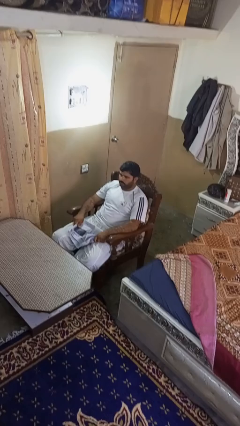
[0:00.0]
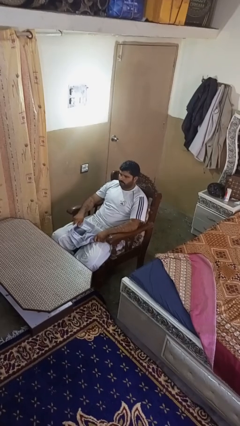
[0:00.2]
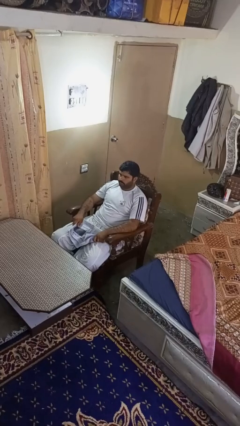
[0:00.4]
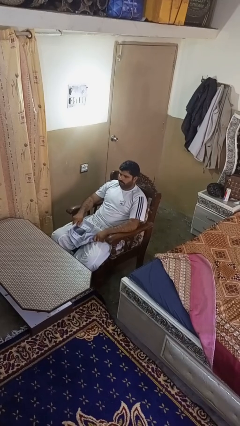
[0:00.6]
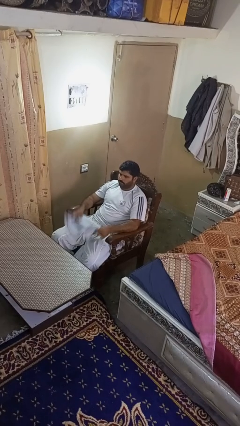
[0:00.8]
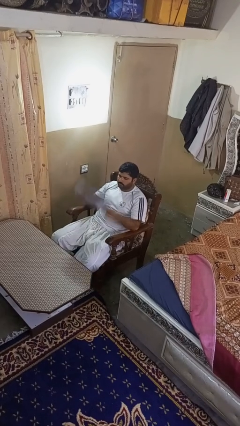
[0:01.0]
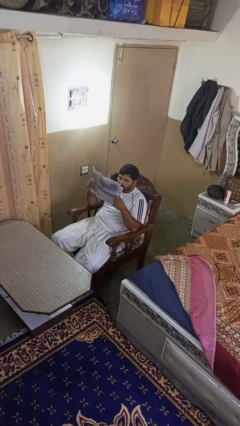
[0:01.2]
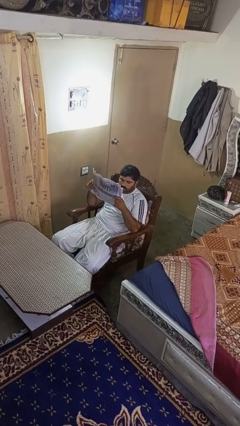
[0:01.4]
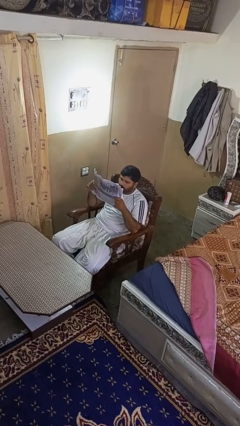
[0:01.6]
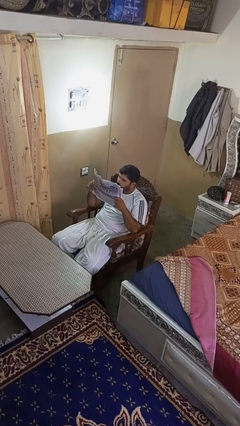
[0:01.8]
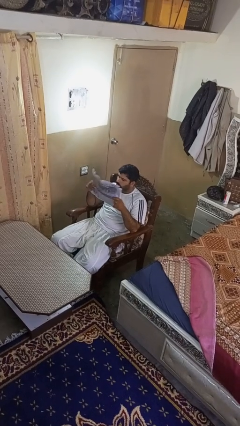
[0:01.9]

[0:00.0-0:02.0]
person reads newspaper

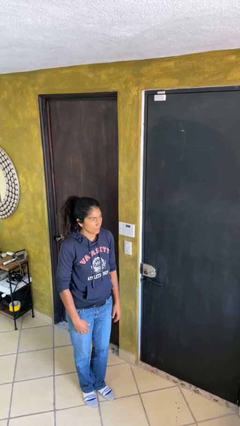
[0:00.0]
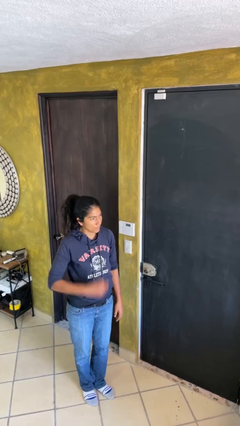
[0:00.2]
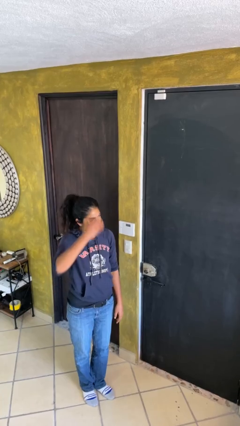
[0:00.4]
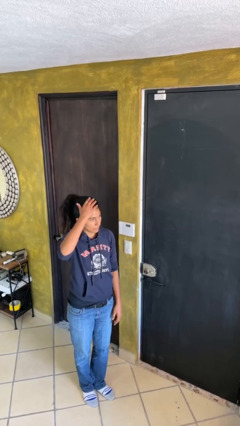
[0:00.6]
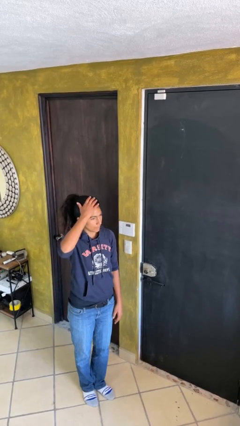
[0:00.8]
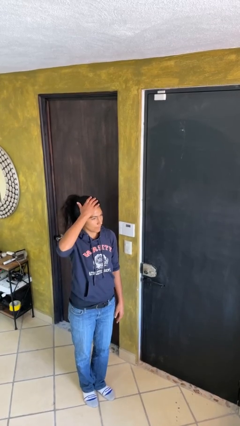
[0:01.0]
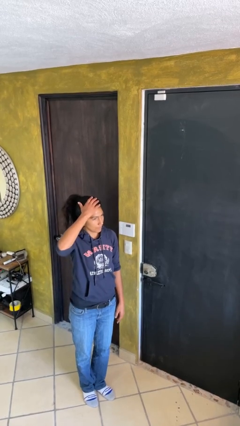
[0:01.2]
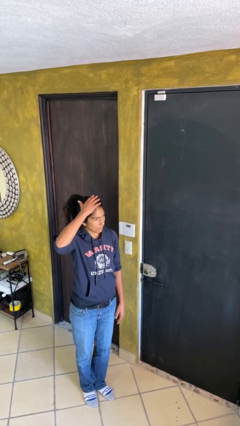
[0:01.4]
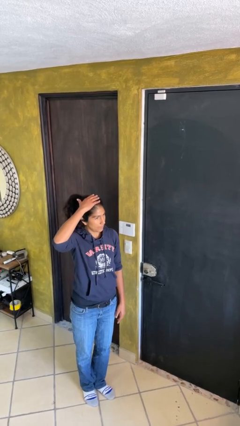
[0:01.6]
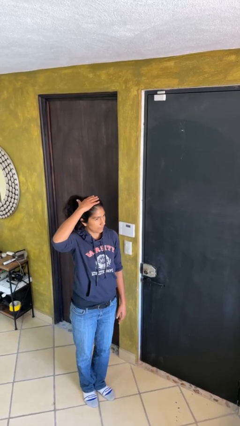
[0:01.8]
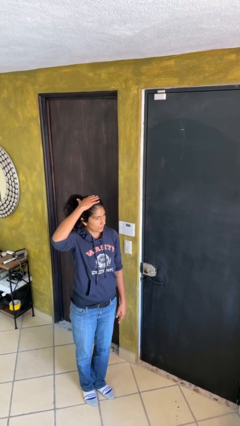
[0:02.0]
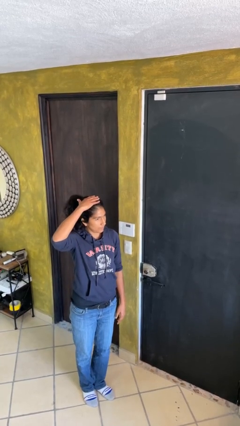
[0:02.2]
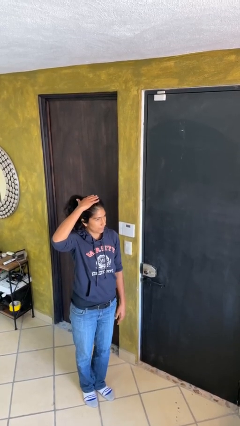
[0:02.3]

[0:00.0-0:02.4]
person pats head

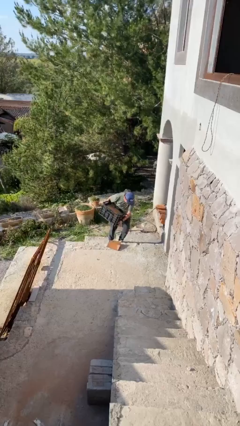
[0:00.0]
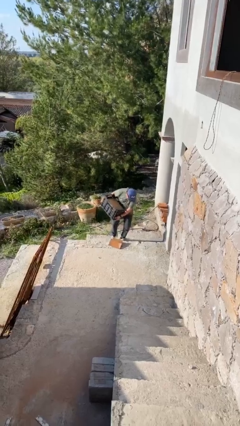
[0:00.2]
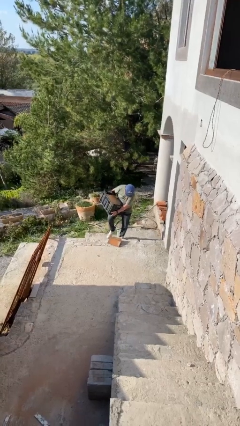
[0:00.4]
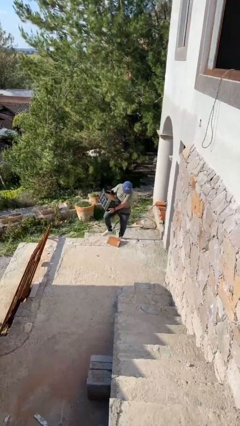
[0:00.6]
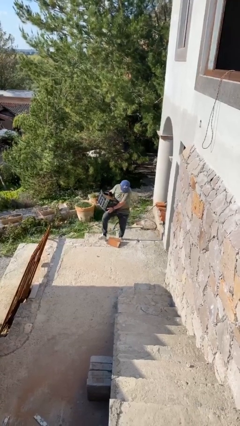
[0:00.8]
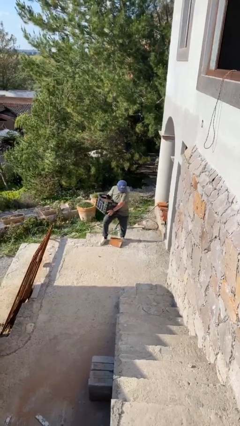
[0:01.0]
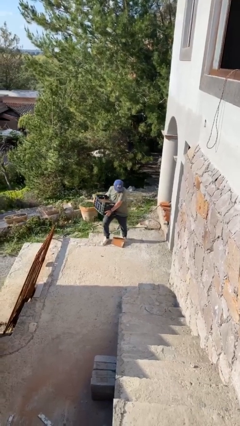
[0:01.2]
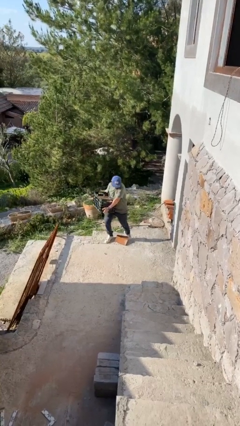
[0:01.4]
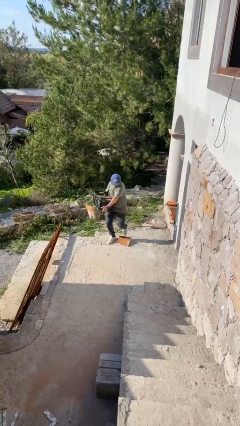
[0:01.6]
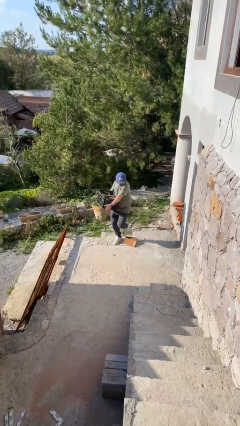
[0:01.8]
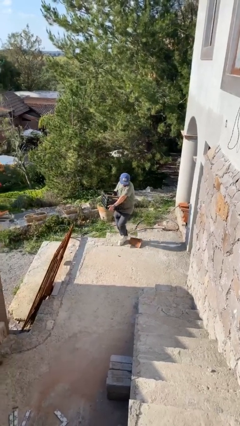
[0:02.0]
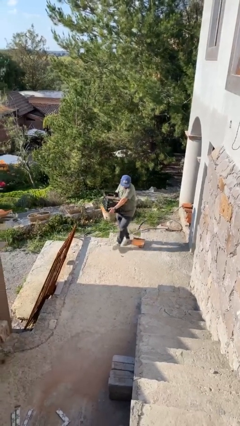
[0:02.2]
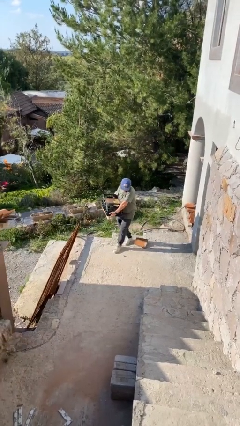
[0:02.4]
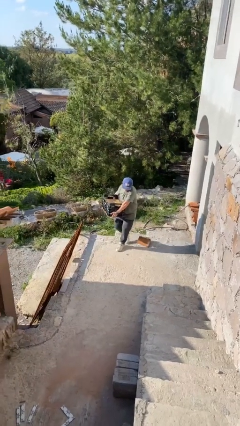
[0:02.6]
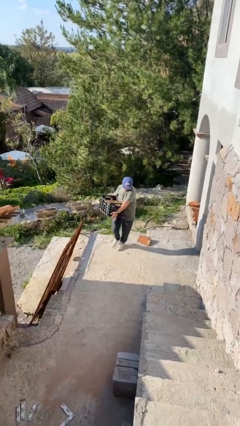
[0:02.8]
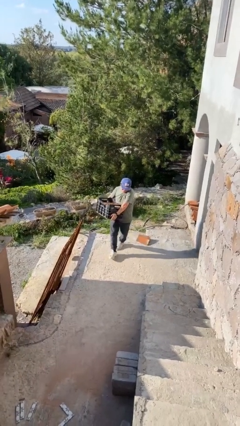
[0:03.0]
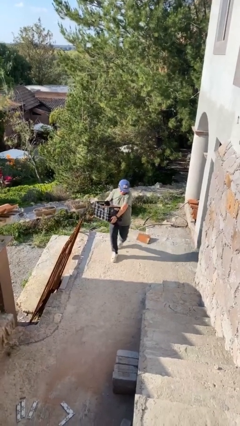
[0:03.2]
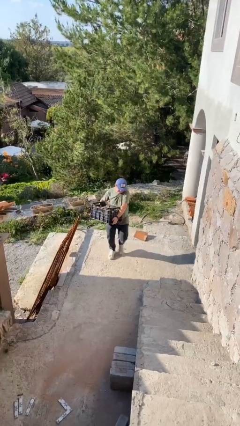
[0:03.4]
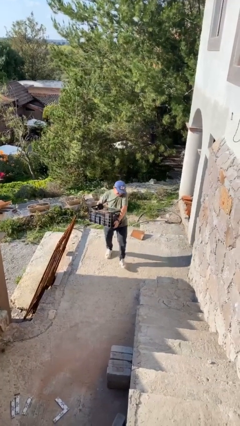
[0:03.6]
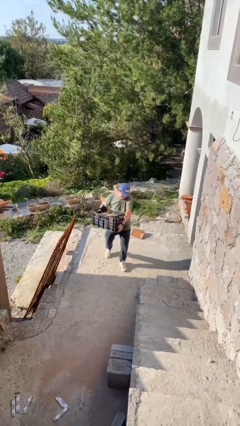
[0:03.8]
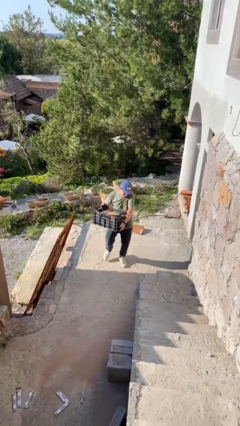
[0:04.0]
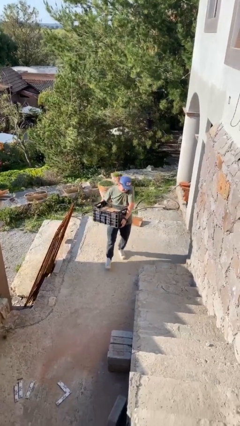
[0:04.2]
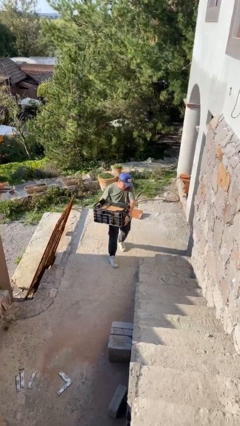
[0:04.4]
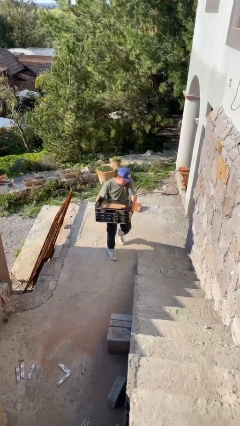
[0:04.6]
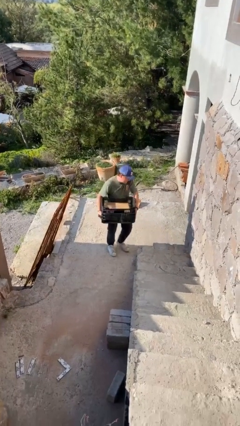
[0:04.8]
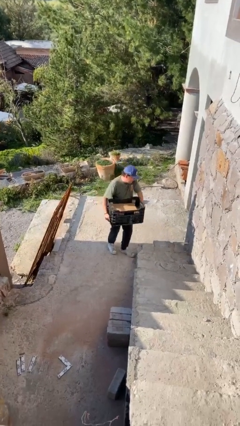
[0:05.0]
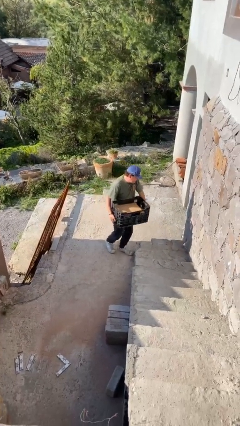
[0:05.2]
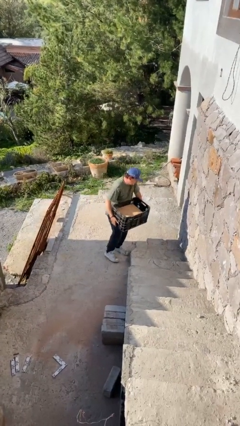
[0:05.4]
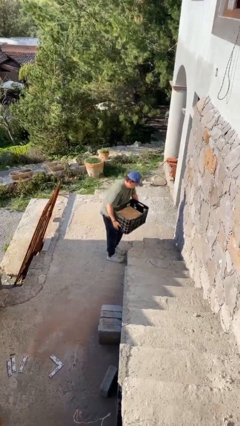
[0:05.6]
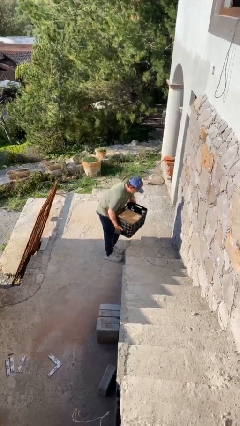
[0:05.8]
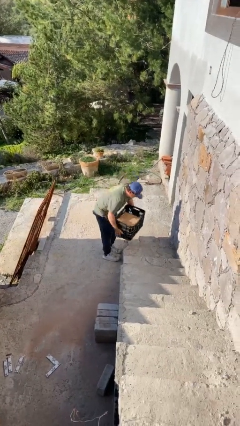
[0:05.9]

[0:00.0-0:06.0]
person carries heavy object

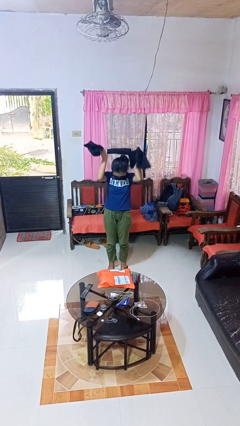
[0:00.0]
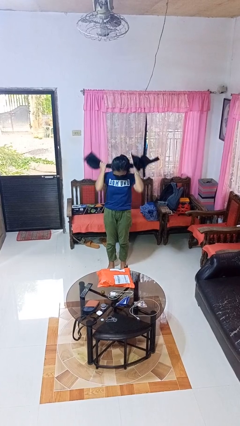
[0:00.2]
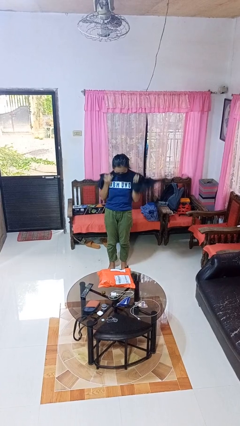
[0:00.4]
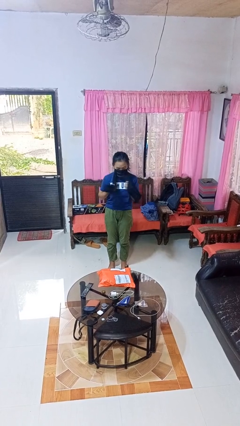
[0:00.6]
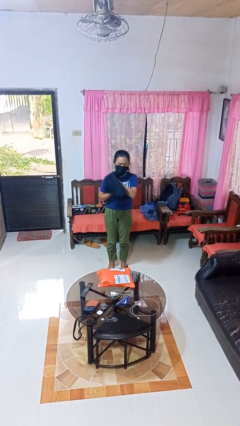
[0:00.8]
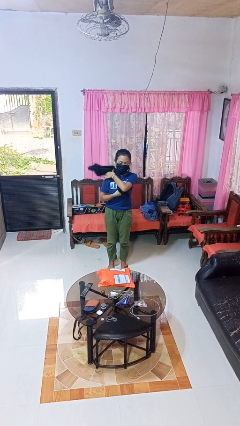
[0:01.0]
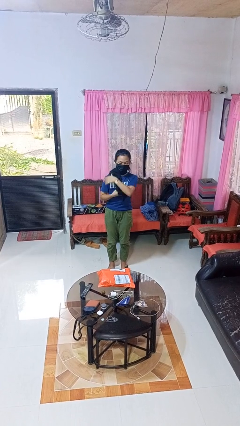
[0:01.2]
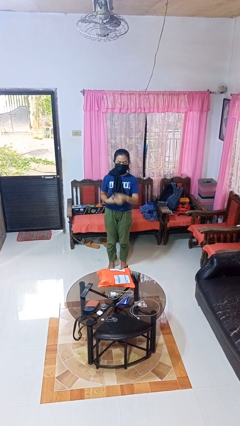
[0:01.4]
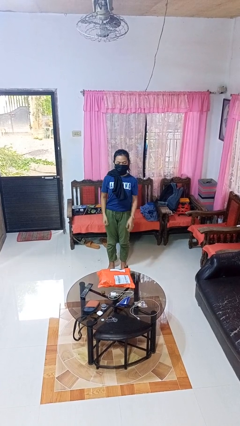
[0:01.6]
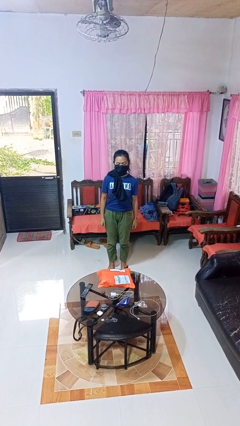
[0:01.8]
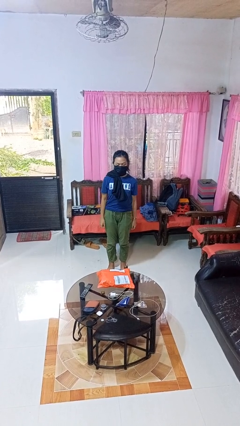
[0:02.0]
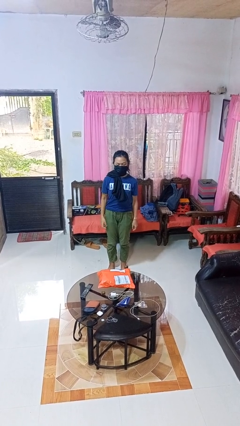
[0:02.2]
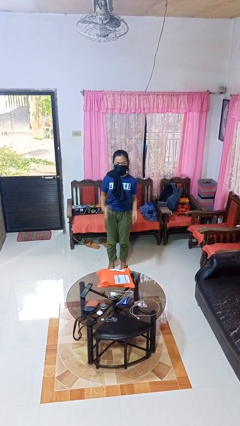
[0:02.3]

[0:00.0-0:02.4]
person puts on scarf

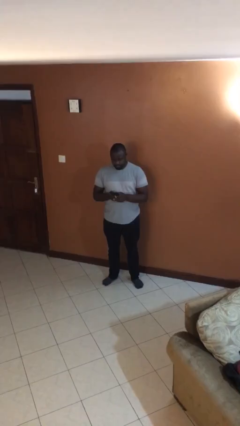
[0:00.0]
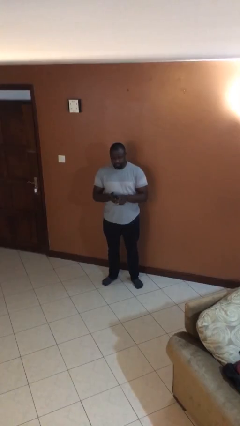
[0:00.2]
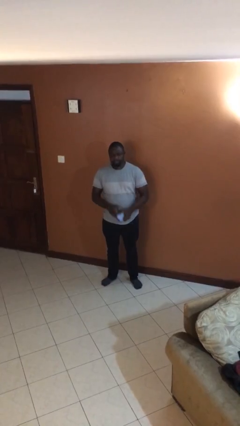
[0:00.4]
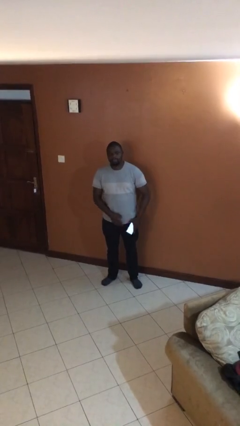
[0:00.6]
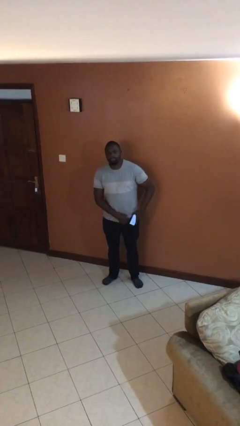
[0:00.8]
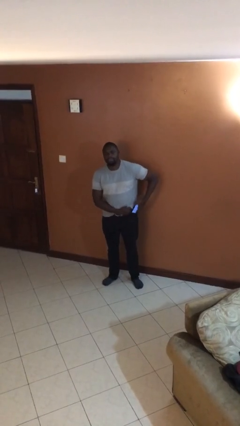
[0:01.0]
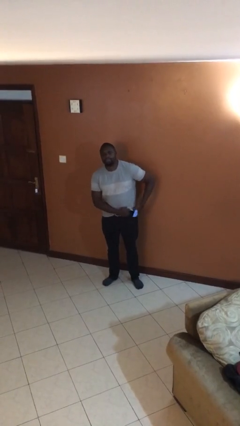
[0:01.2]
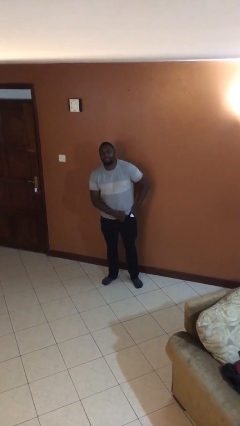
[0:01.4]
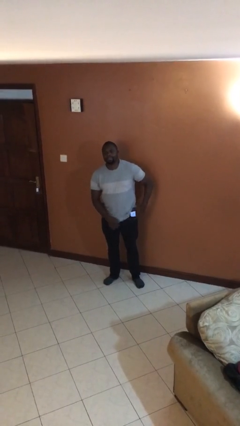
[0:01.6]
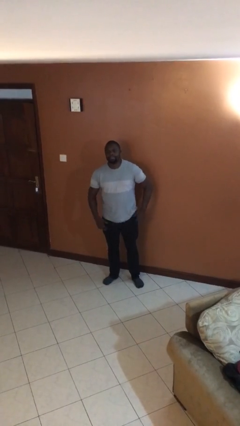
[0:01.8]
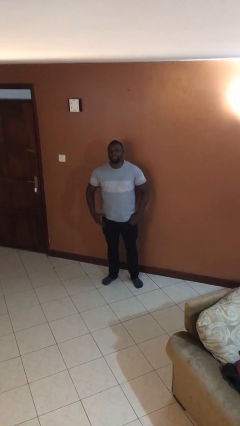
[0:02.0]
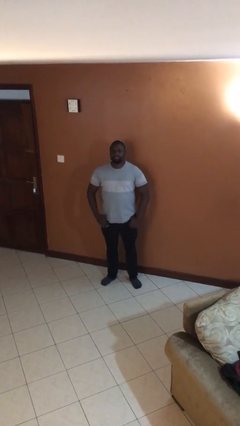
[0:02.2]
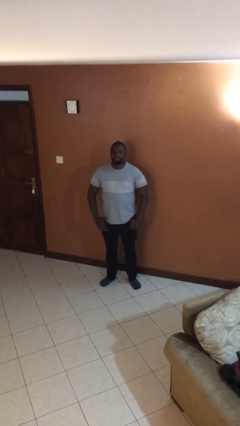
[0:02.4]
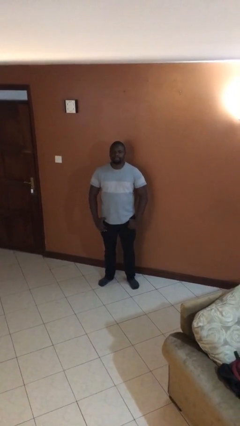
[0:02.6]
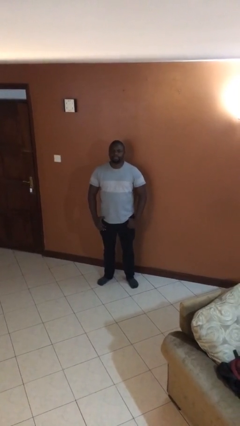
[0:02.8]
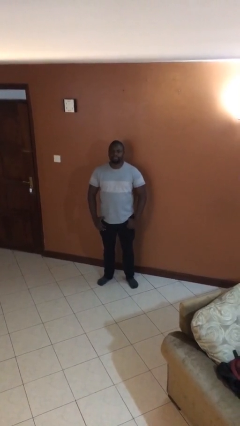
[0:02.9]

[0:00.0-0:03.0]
person puts phone into pocket

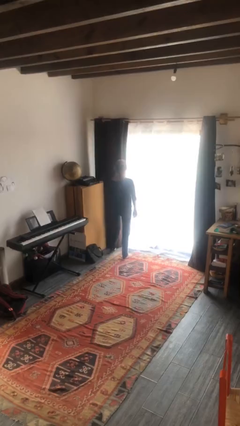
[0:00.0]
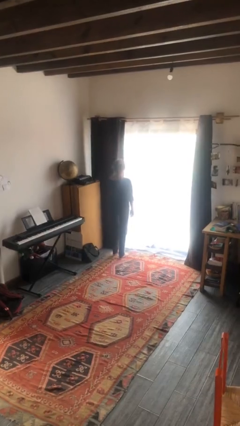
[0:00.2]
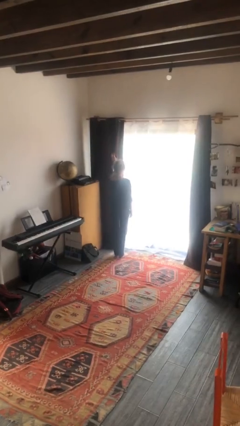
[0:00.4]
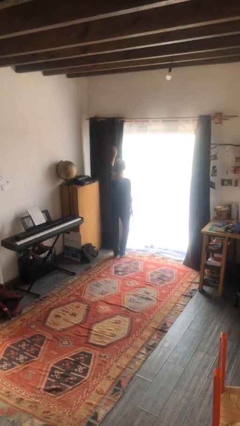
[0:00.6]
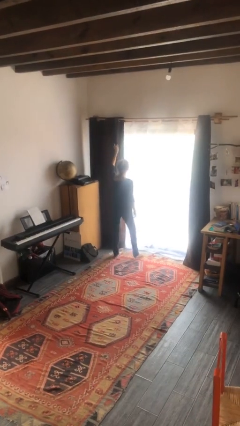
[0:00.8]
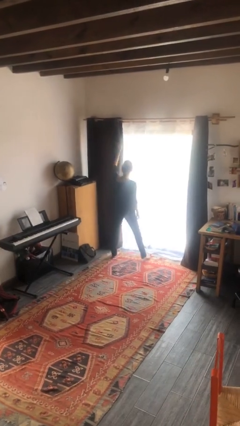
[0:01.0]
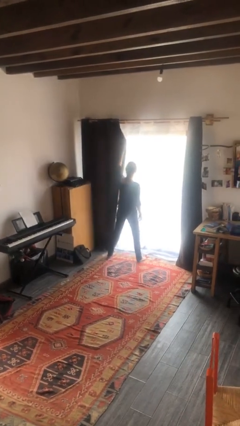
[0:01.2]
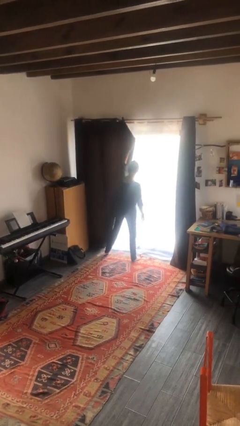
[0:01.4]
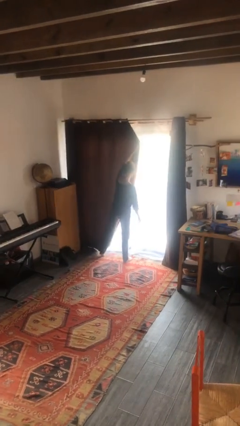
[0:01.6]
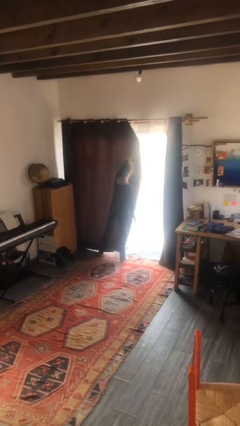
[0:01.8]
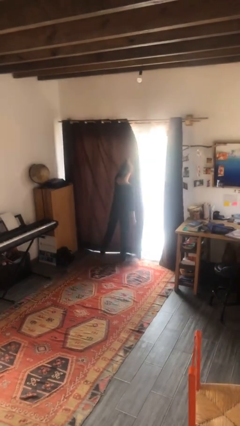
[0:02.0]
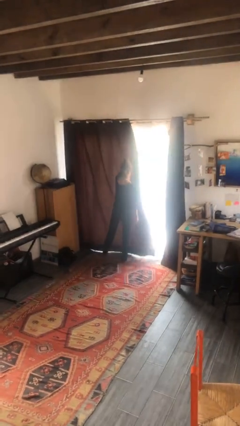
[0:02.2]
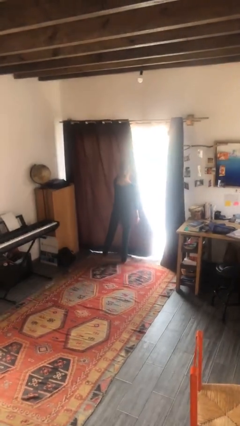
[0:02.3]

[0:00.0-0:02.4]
person closes curtains
